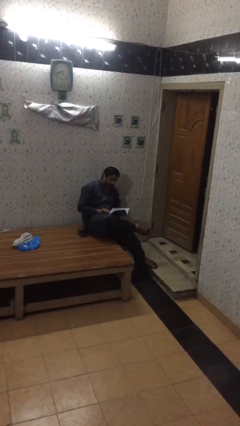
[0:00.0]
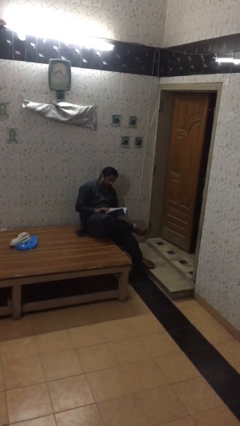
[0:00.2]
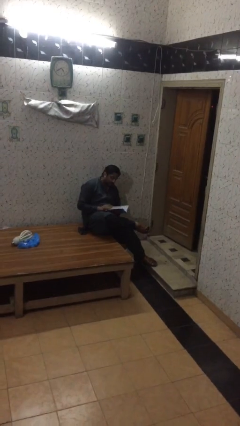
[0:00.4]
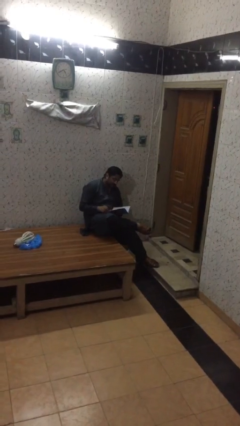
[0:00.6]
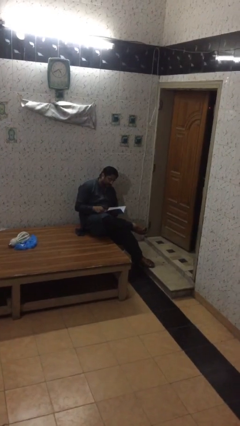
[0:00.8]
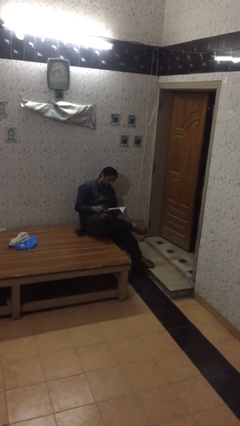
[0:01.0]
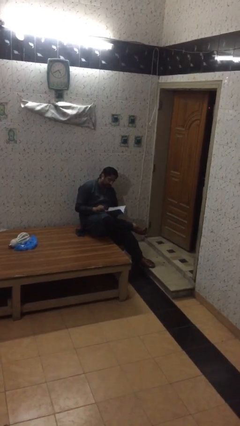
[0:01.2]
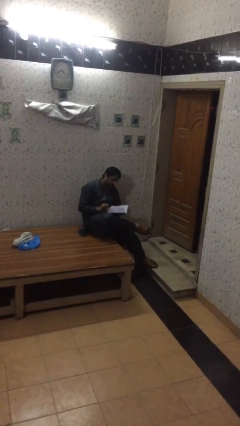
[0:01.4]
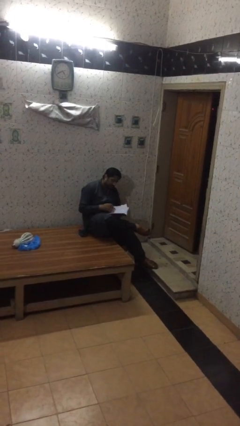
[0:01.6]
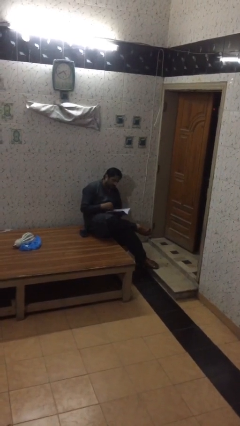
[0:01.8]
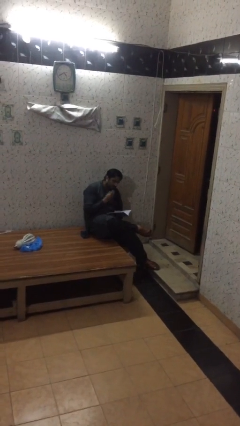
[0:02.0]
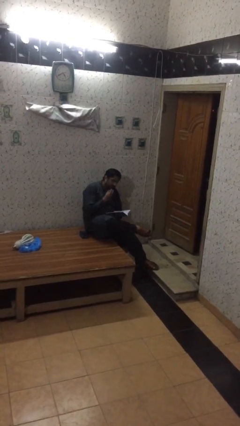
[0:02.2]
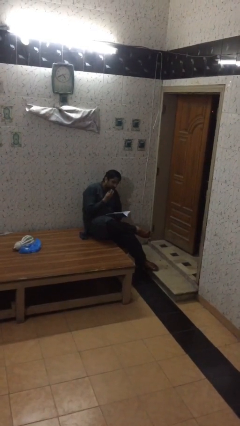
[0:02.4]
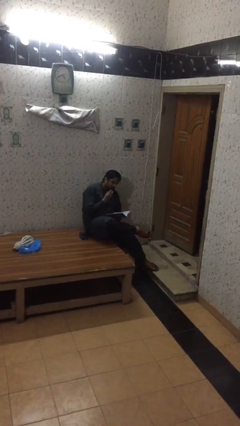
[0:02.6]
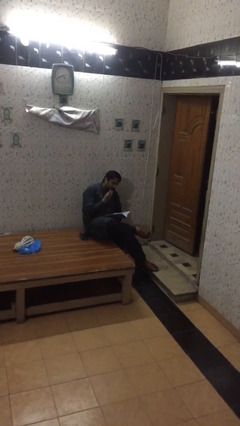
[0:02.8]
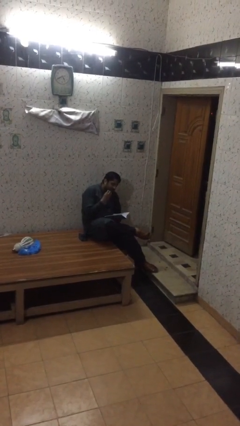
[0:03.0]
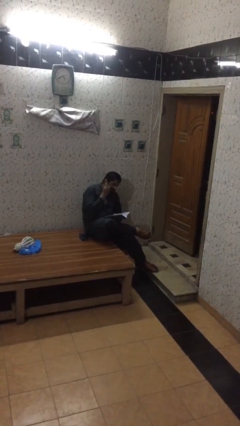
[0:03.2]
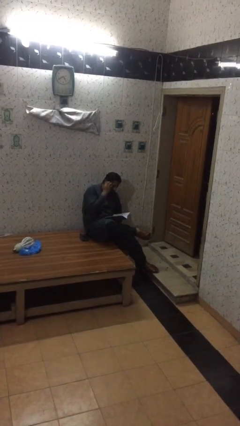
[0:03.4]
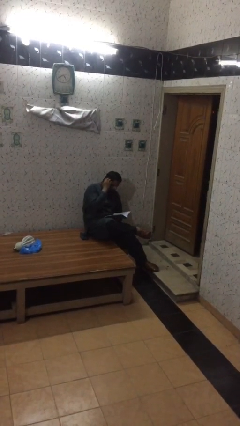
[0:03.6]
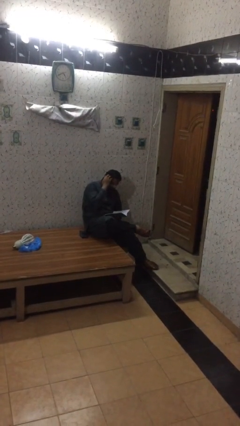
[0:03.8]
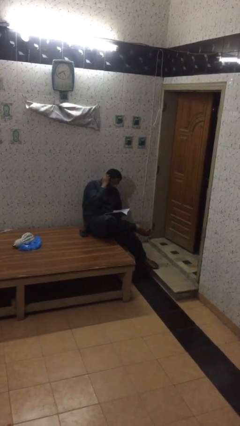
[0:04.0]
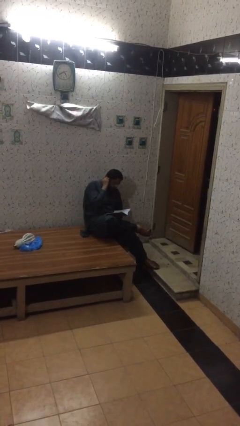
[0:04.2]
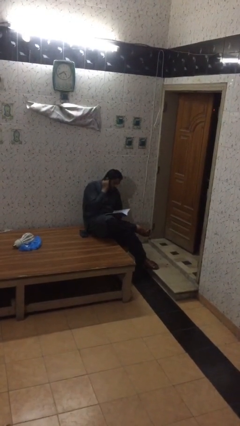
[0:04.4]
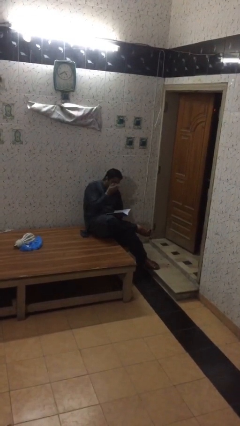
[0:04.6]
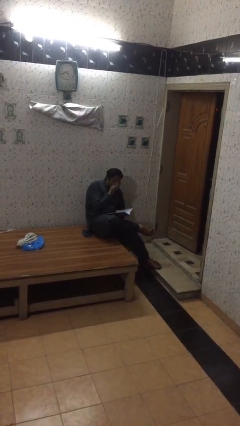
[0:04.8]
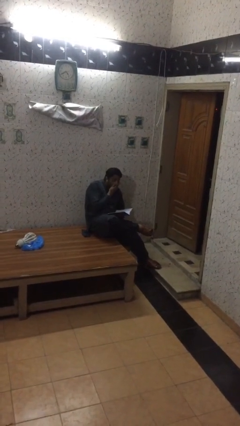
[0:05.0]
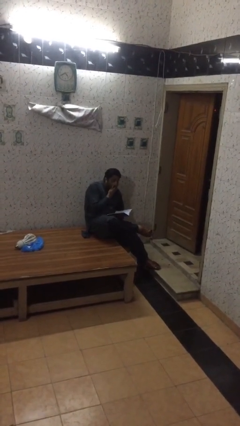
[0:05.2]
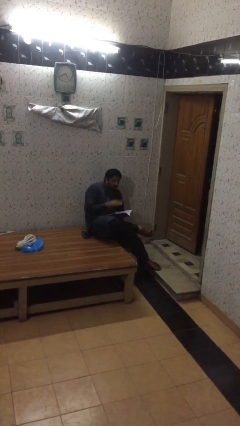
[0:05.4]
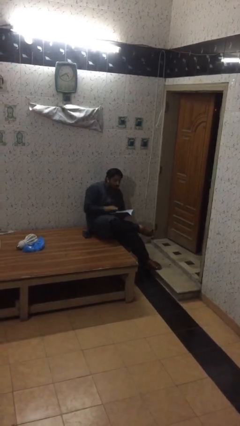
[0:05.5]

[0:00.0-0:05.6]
person reads document

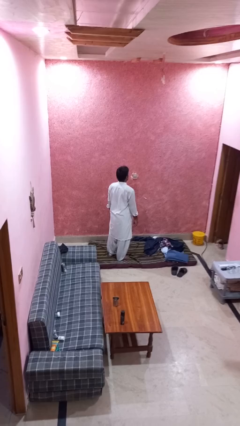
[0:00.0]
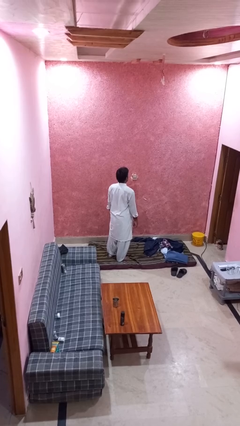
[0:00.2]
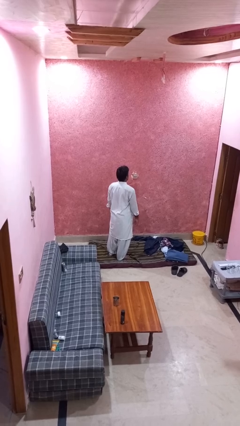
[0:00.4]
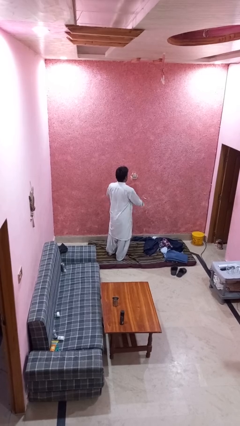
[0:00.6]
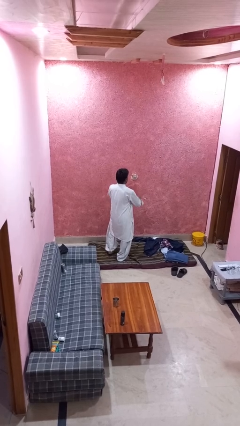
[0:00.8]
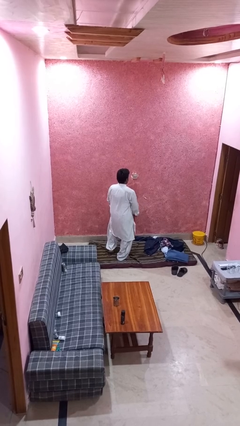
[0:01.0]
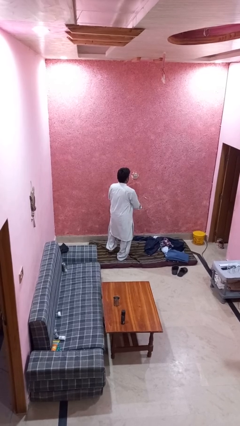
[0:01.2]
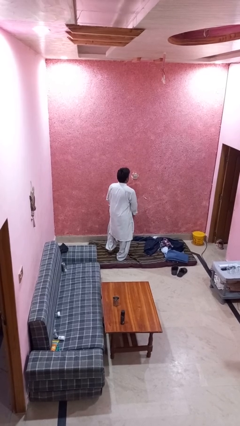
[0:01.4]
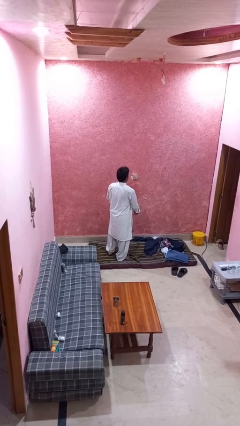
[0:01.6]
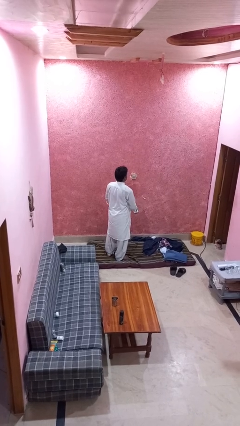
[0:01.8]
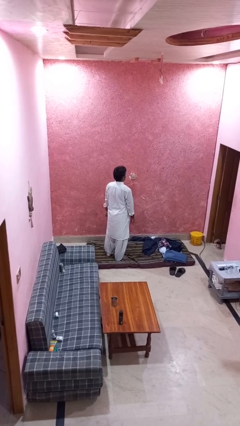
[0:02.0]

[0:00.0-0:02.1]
person slaps hands on thighs

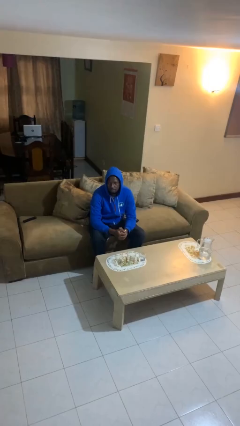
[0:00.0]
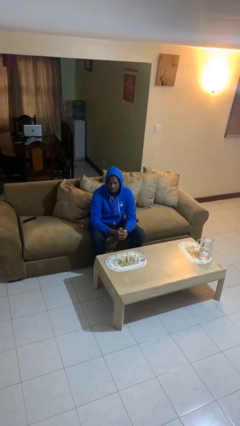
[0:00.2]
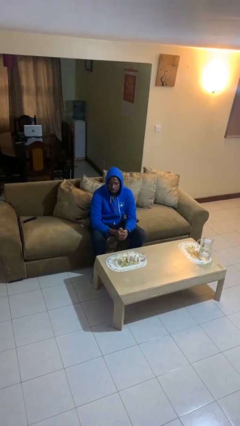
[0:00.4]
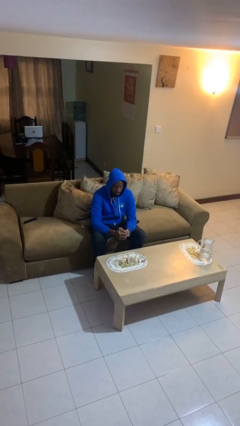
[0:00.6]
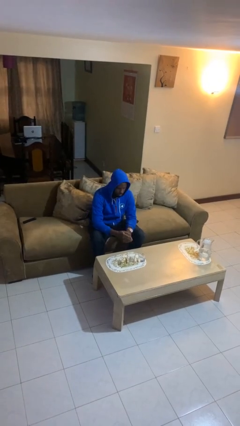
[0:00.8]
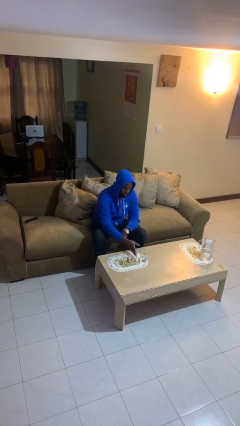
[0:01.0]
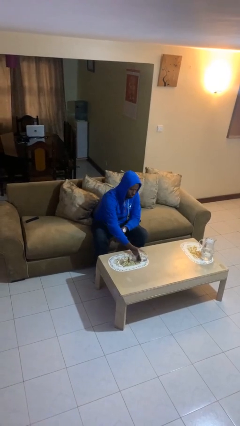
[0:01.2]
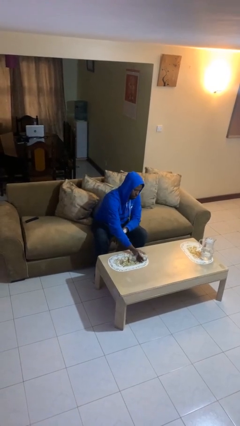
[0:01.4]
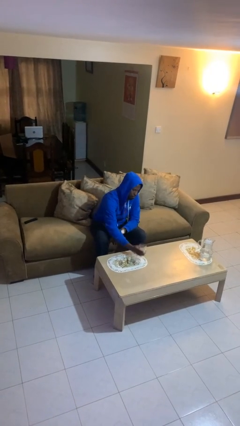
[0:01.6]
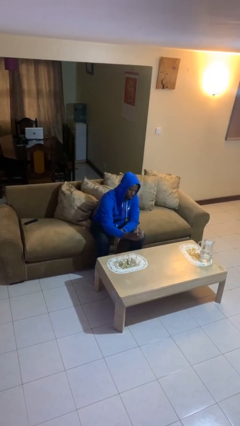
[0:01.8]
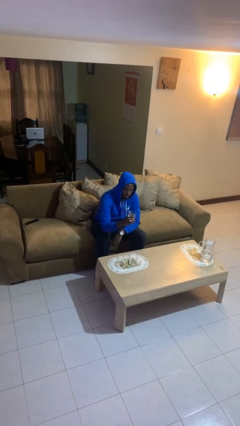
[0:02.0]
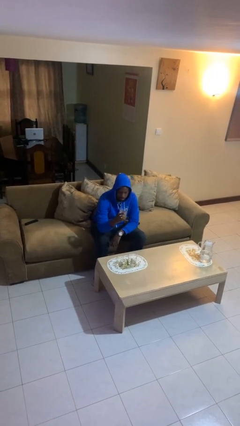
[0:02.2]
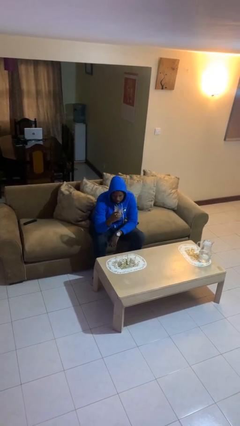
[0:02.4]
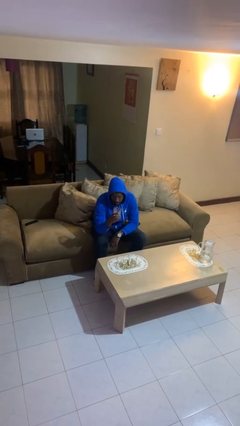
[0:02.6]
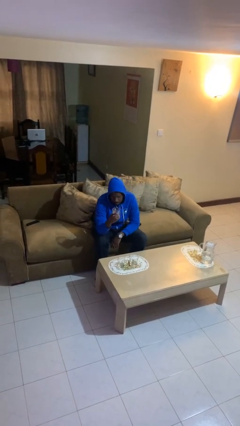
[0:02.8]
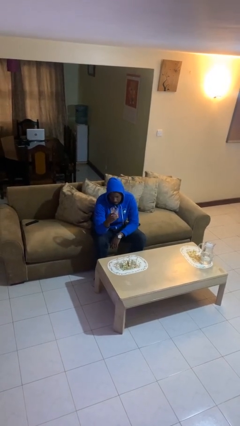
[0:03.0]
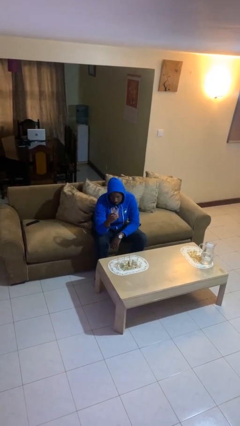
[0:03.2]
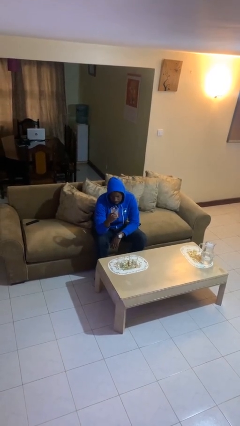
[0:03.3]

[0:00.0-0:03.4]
person picks up object from table

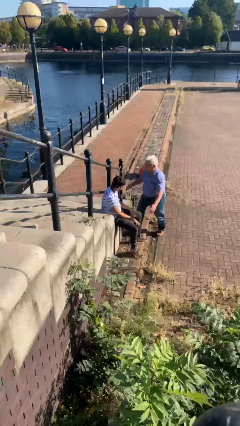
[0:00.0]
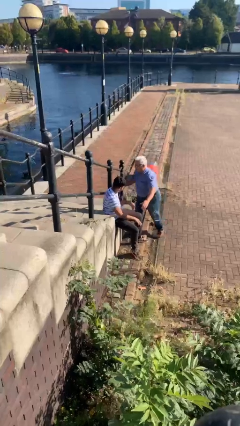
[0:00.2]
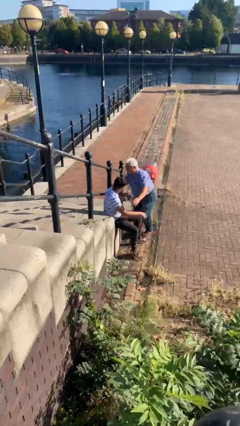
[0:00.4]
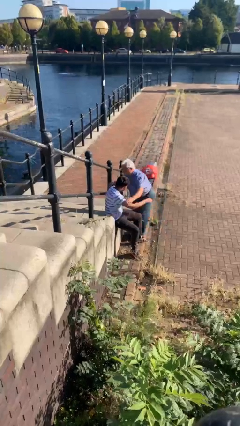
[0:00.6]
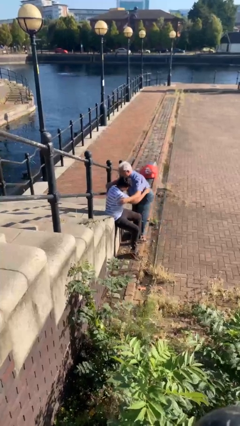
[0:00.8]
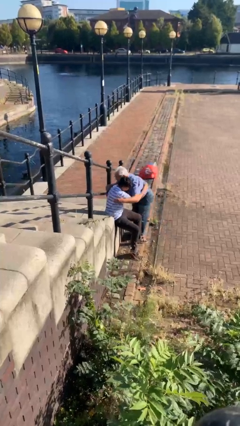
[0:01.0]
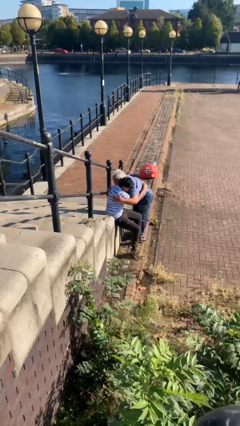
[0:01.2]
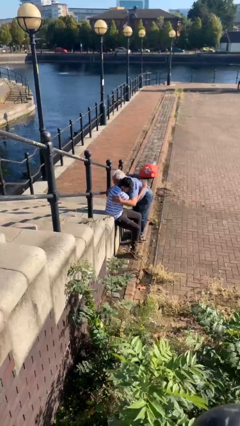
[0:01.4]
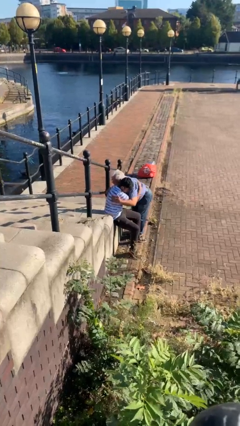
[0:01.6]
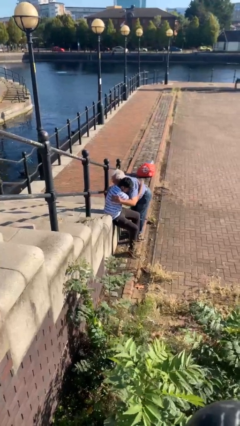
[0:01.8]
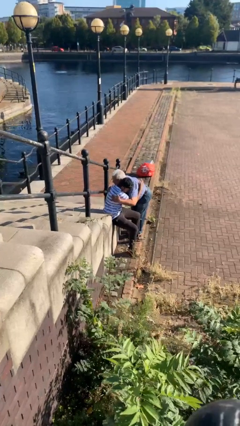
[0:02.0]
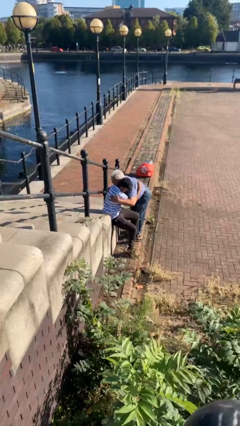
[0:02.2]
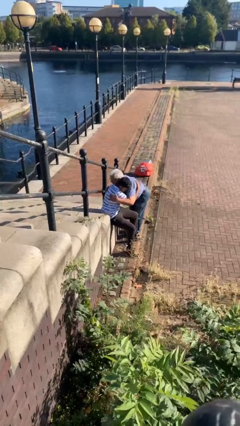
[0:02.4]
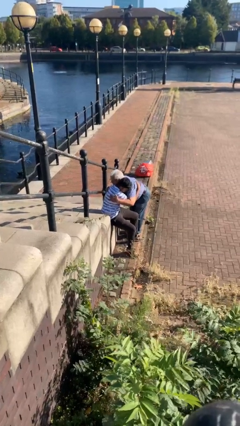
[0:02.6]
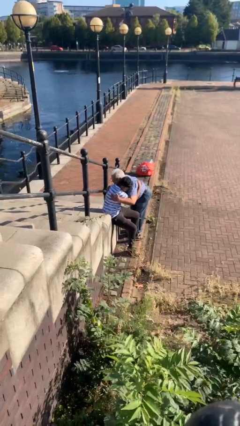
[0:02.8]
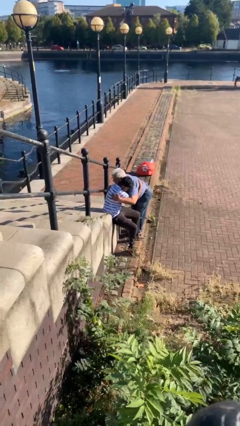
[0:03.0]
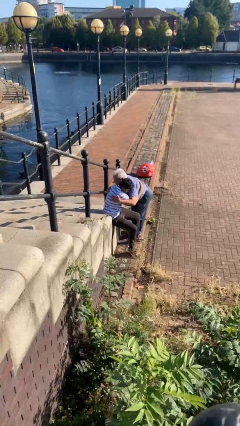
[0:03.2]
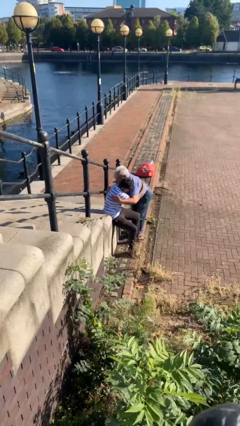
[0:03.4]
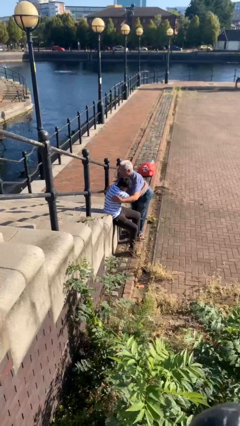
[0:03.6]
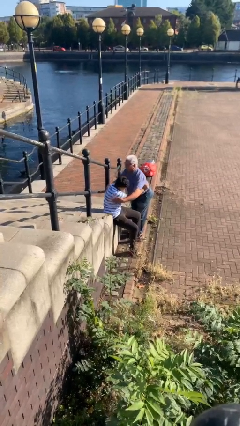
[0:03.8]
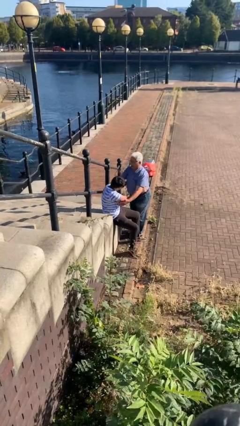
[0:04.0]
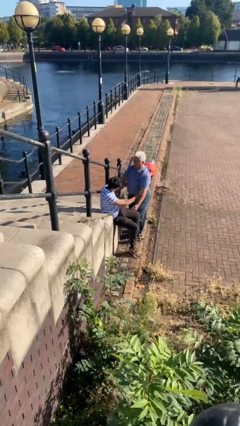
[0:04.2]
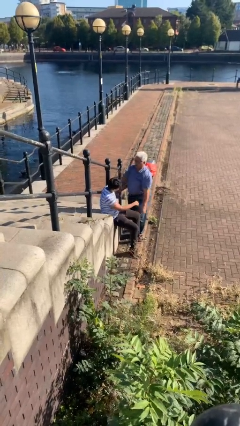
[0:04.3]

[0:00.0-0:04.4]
person embraces person

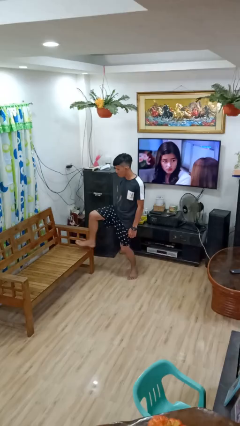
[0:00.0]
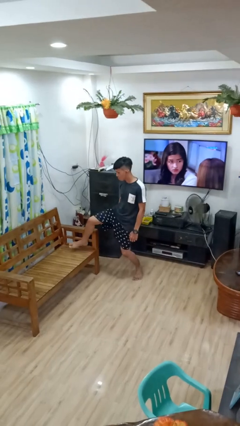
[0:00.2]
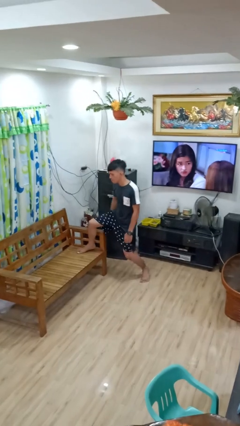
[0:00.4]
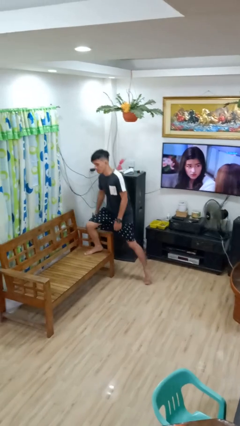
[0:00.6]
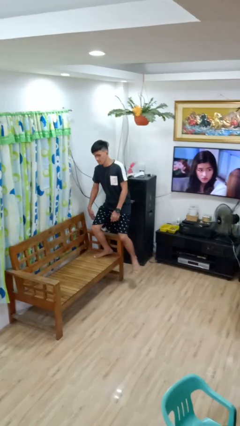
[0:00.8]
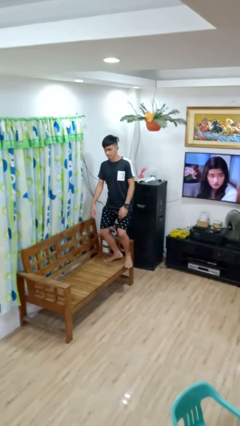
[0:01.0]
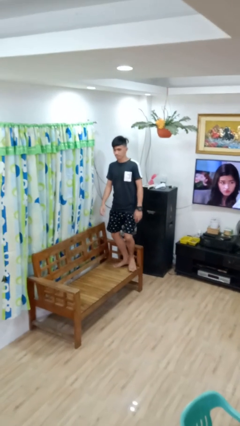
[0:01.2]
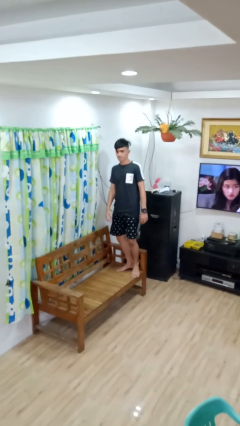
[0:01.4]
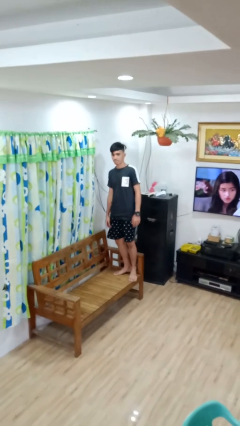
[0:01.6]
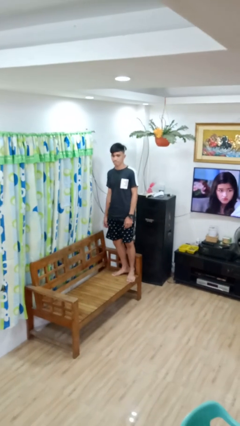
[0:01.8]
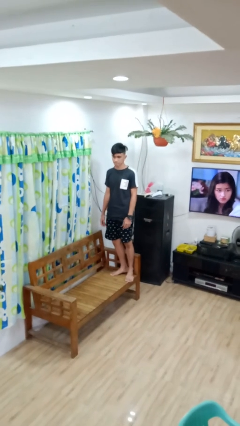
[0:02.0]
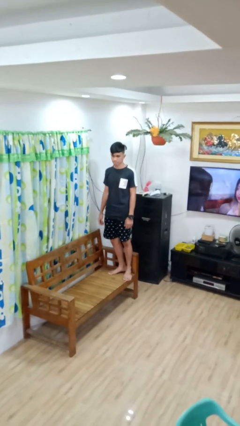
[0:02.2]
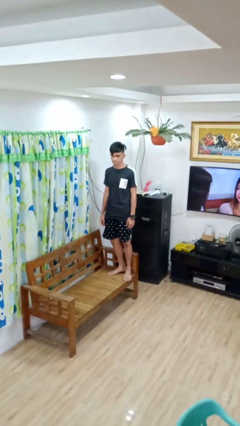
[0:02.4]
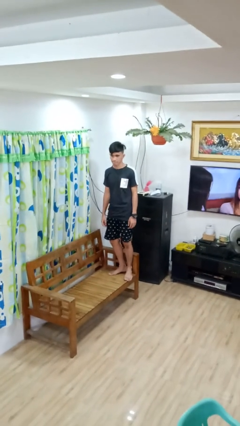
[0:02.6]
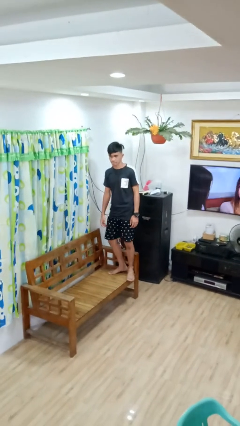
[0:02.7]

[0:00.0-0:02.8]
person climbs on couch
